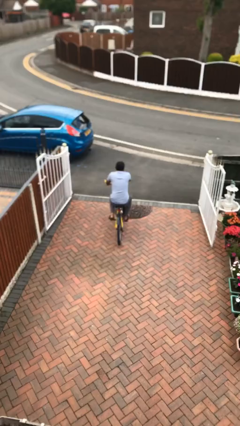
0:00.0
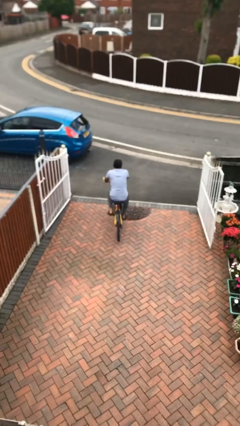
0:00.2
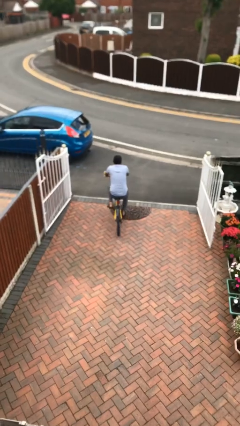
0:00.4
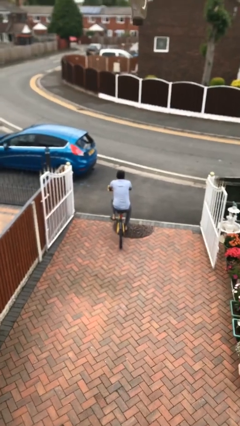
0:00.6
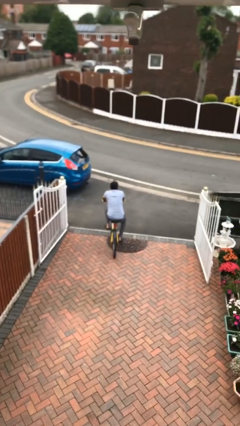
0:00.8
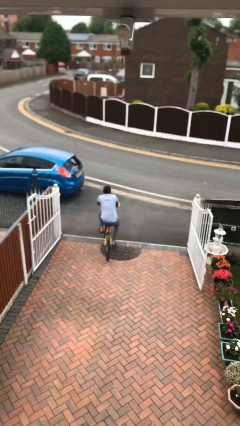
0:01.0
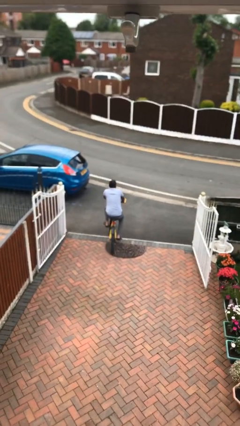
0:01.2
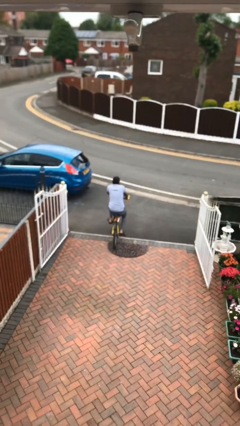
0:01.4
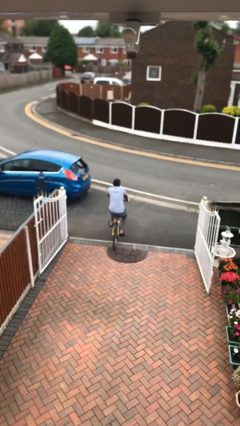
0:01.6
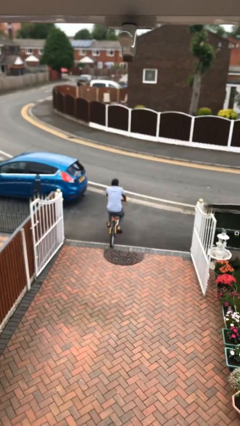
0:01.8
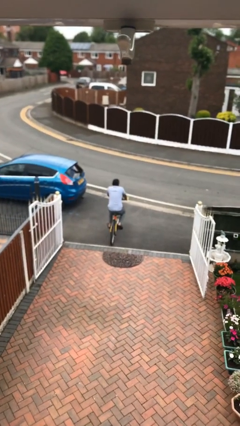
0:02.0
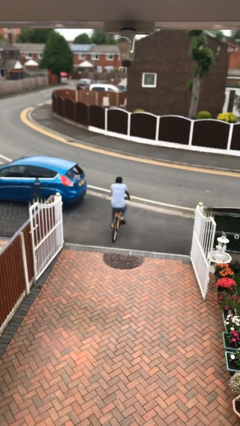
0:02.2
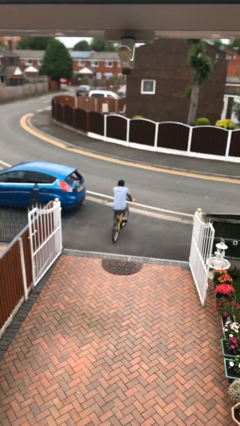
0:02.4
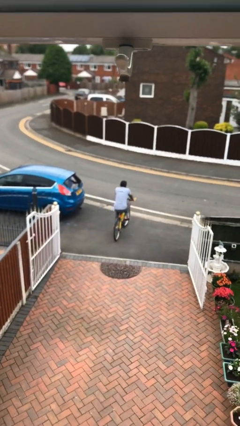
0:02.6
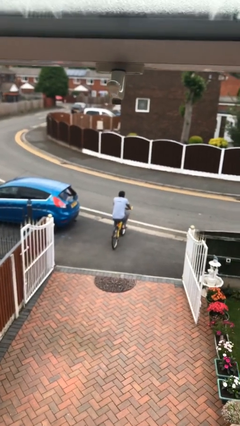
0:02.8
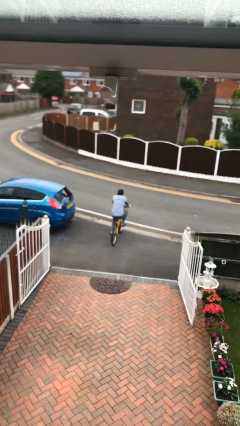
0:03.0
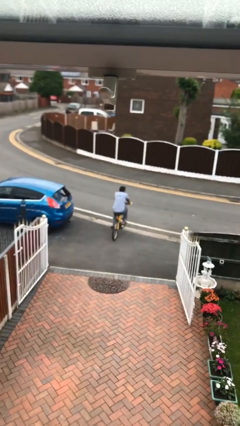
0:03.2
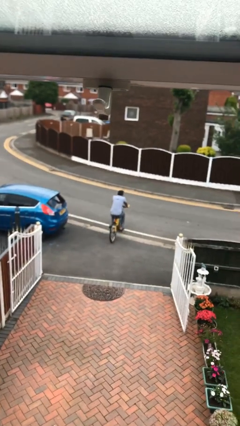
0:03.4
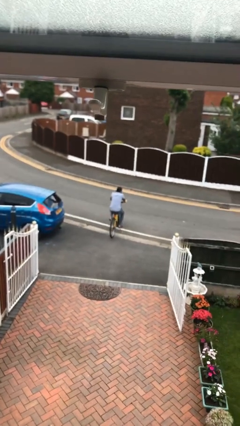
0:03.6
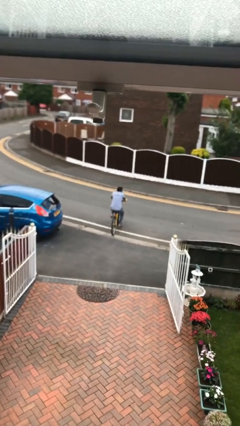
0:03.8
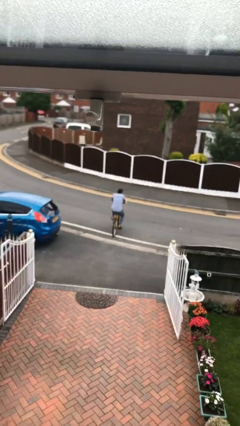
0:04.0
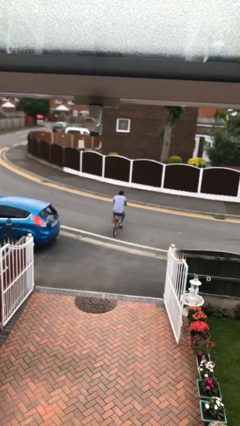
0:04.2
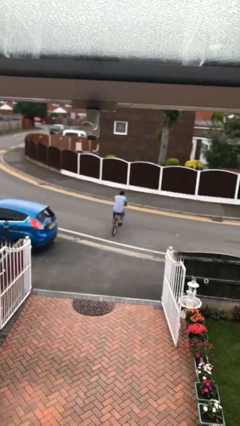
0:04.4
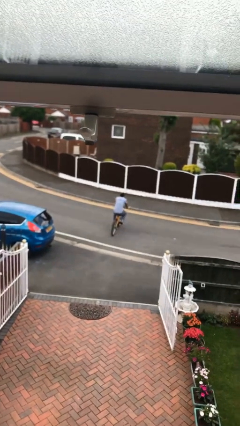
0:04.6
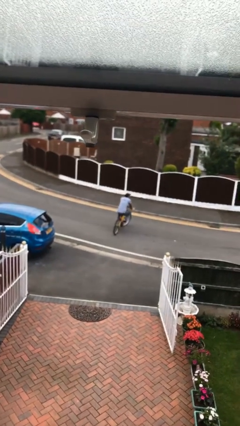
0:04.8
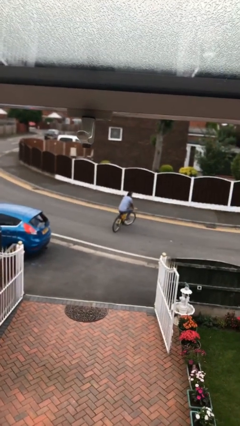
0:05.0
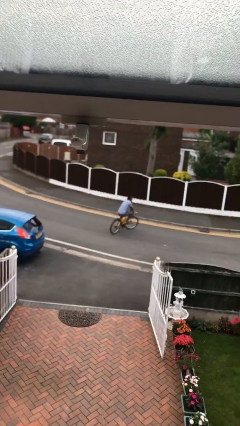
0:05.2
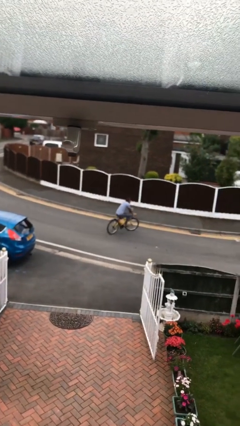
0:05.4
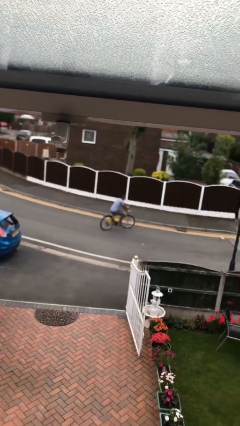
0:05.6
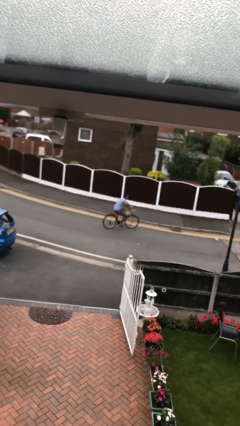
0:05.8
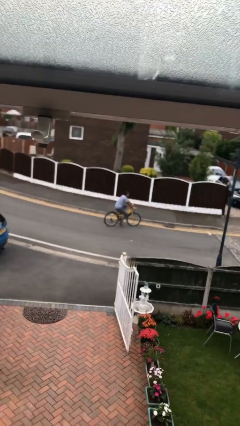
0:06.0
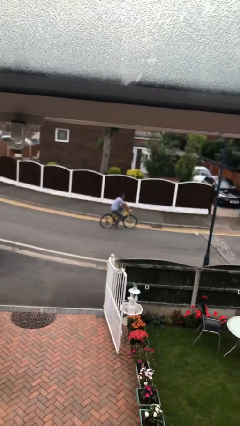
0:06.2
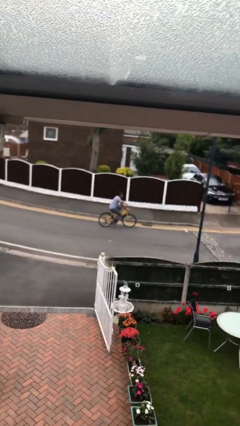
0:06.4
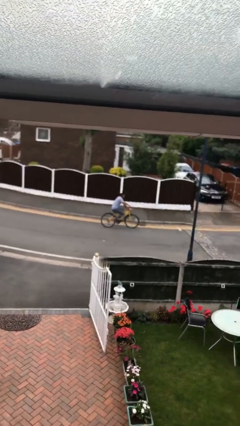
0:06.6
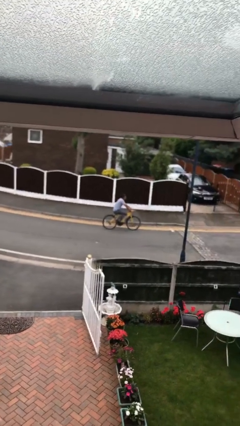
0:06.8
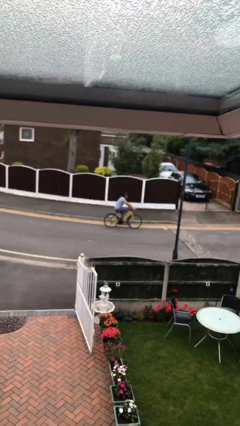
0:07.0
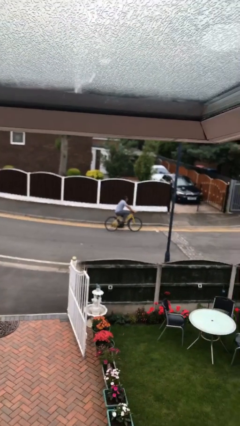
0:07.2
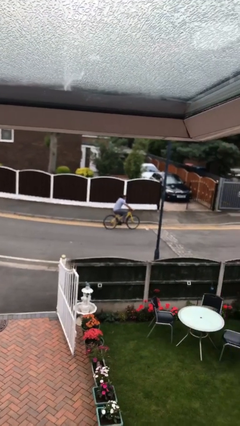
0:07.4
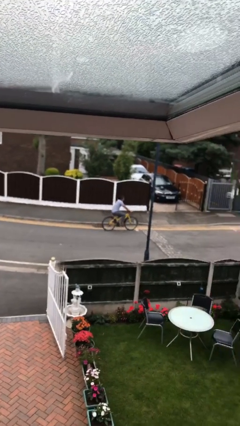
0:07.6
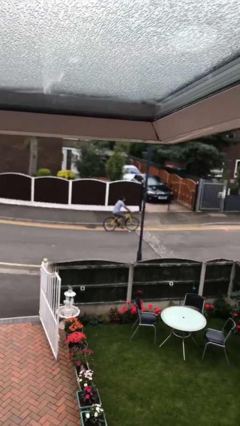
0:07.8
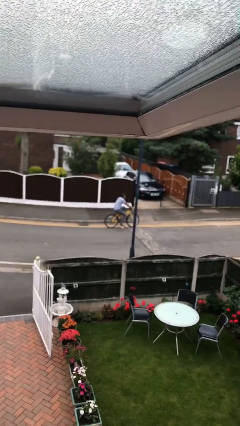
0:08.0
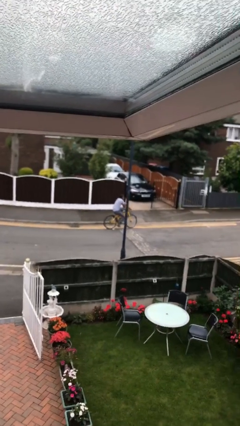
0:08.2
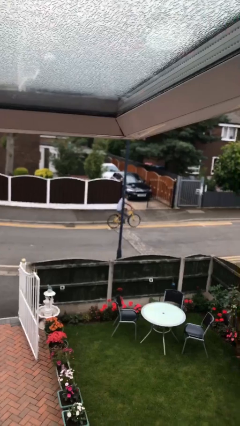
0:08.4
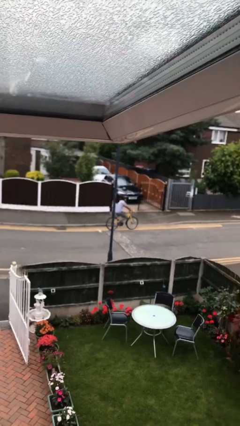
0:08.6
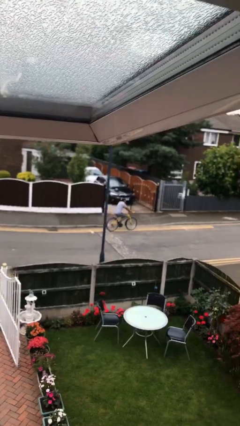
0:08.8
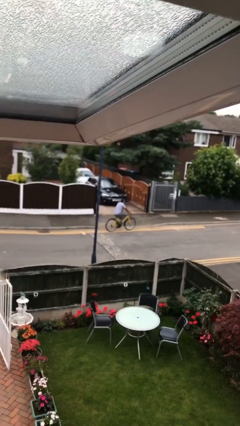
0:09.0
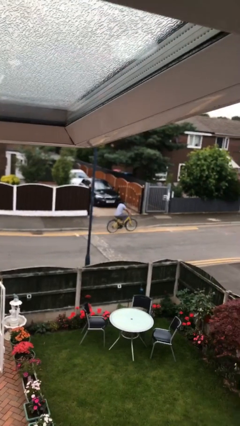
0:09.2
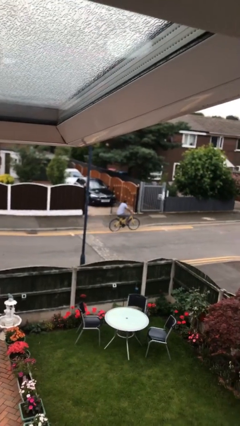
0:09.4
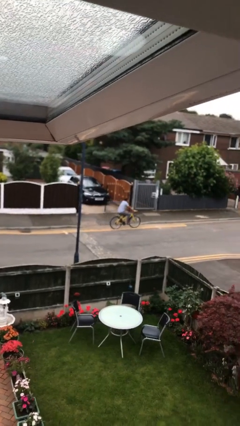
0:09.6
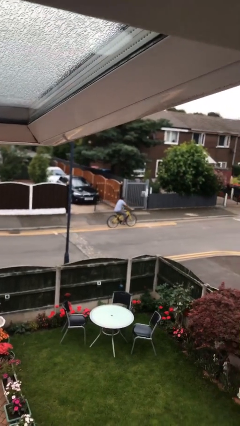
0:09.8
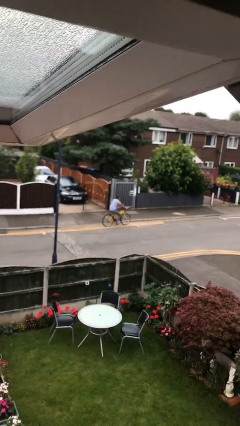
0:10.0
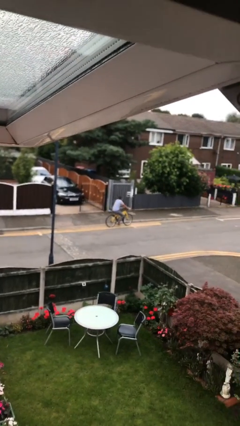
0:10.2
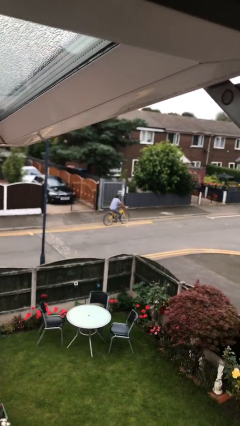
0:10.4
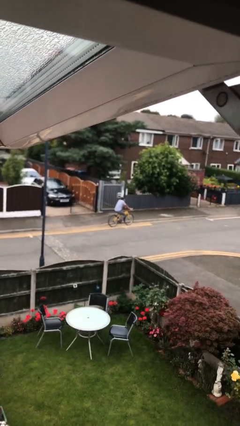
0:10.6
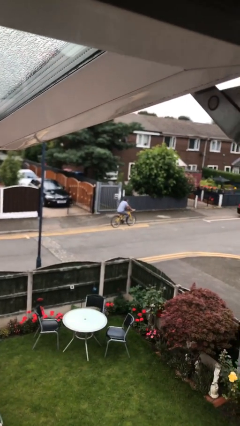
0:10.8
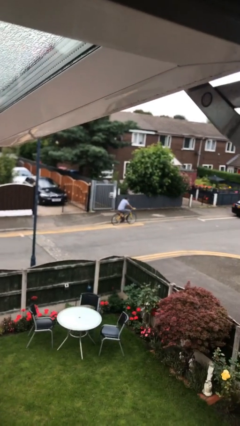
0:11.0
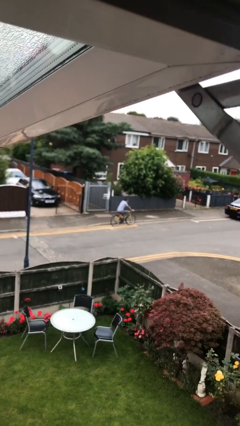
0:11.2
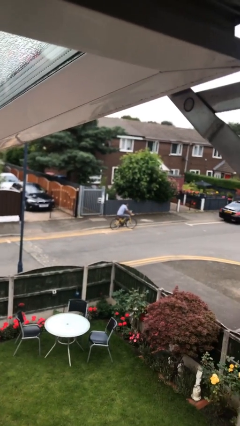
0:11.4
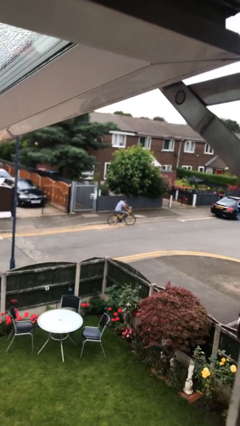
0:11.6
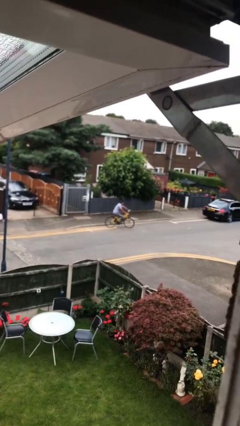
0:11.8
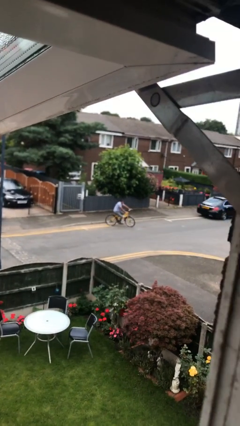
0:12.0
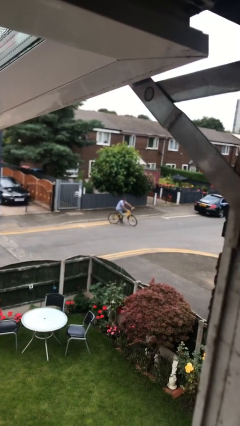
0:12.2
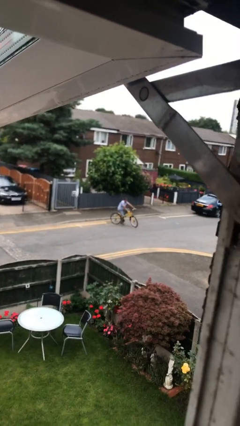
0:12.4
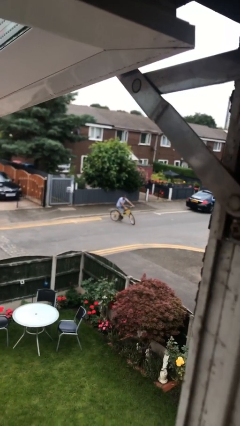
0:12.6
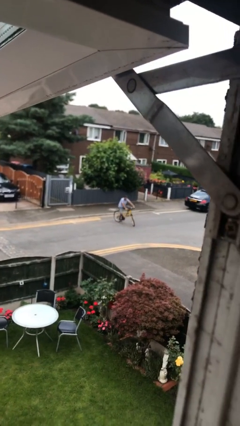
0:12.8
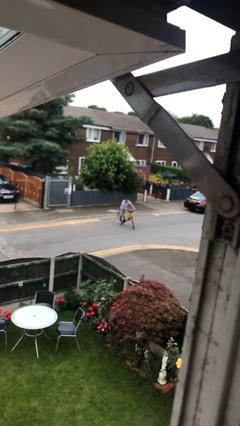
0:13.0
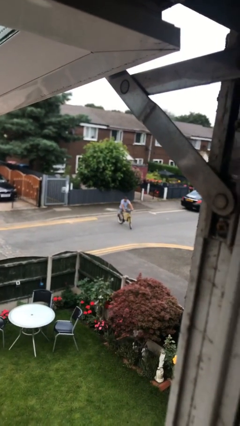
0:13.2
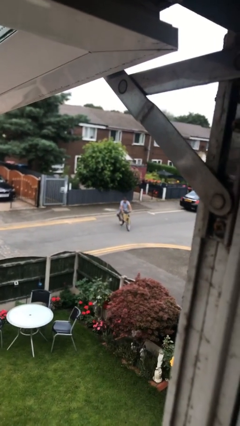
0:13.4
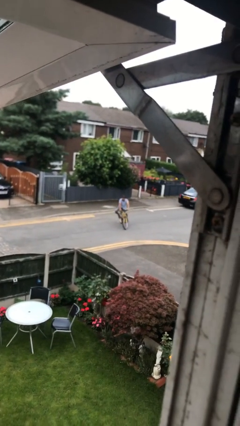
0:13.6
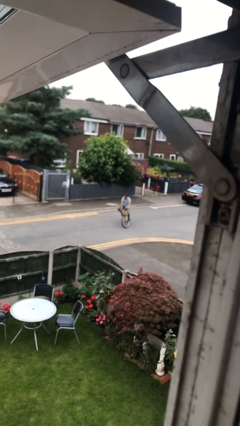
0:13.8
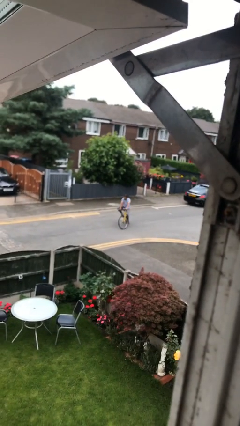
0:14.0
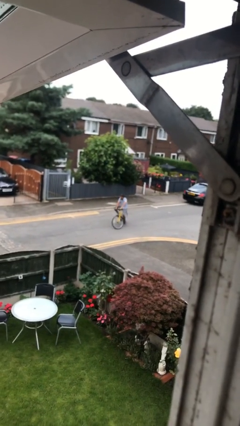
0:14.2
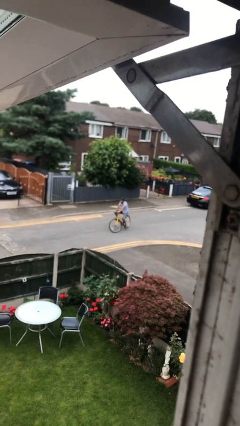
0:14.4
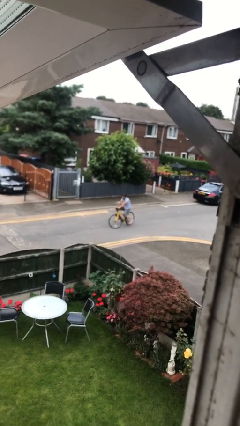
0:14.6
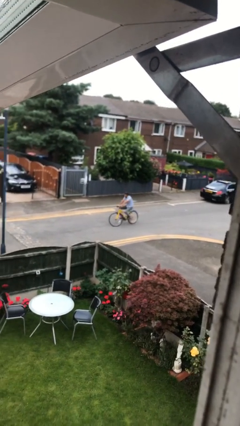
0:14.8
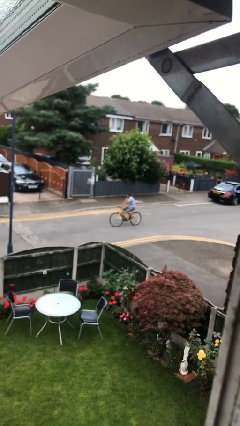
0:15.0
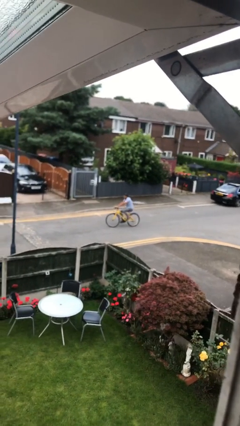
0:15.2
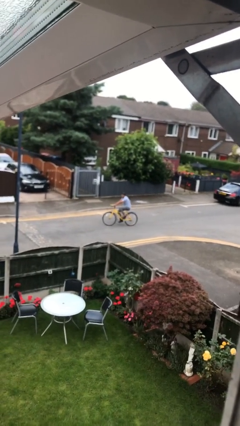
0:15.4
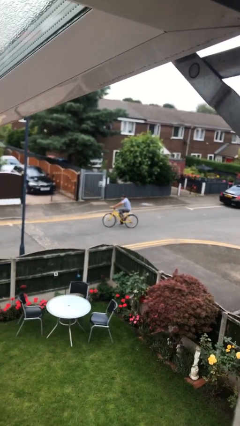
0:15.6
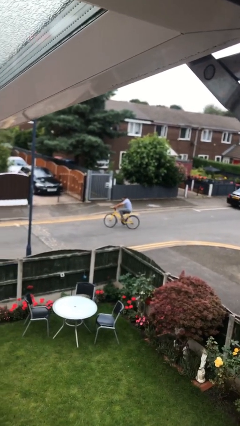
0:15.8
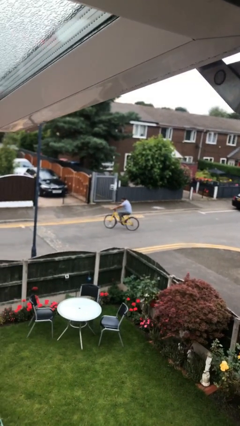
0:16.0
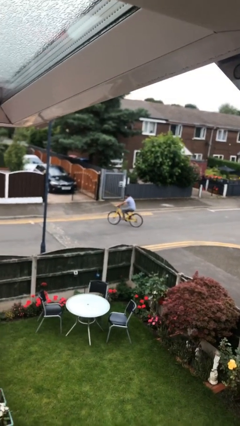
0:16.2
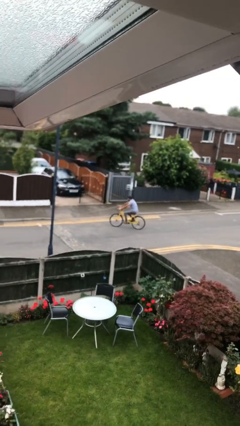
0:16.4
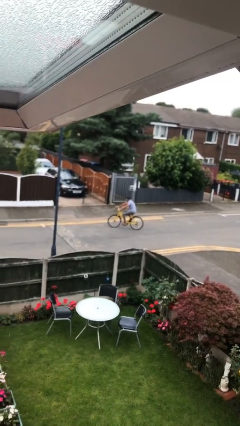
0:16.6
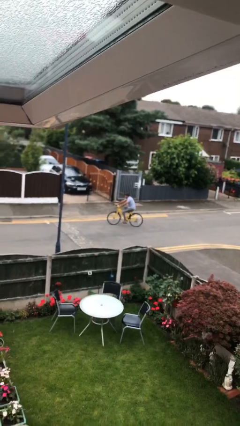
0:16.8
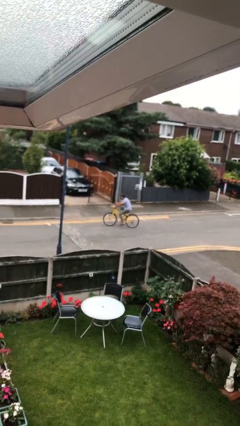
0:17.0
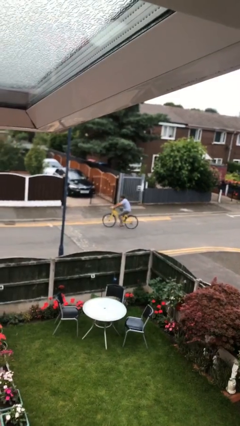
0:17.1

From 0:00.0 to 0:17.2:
person rides bicycle

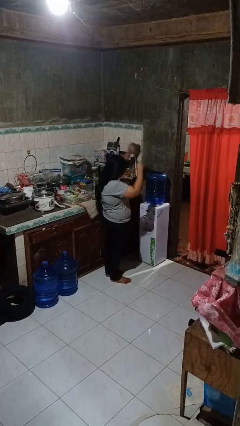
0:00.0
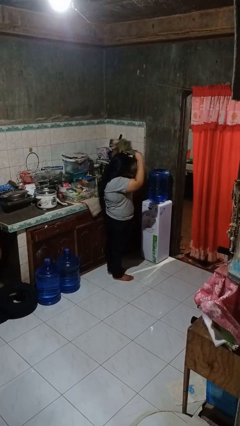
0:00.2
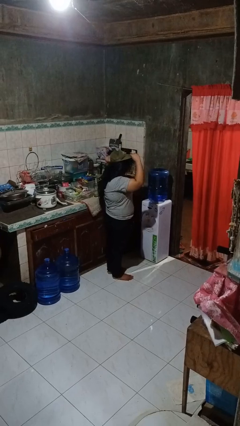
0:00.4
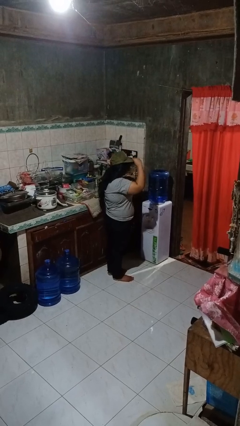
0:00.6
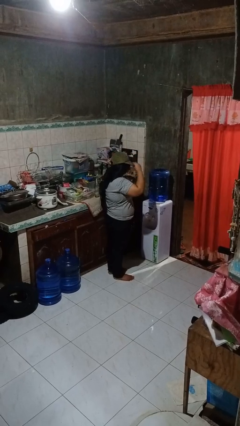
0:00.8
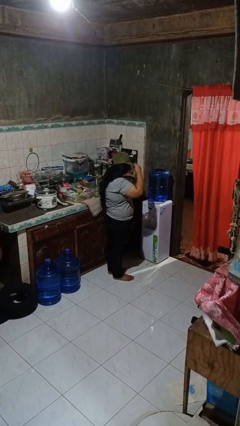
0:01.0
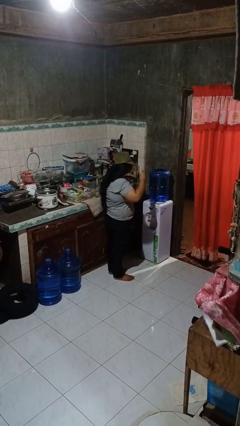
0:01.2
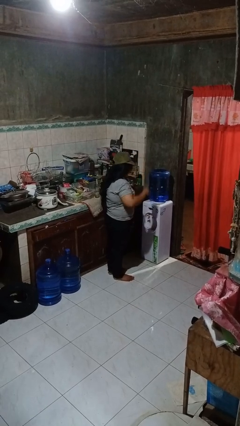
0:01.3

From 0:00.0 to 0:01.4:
person puts on hat
